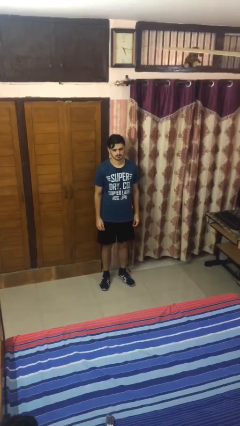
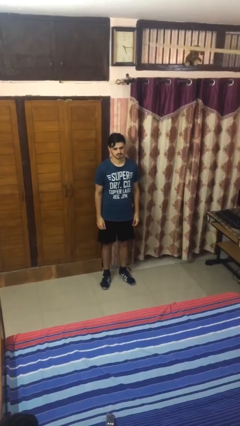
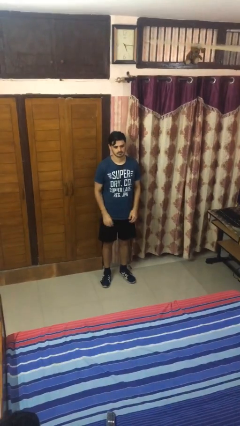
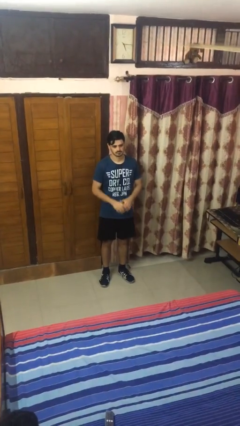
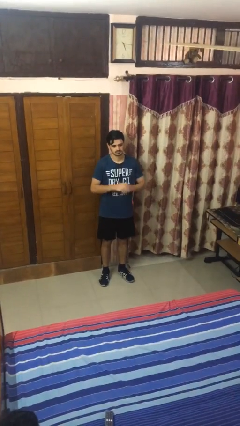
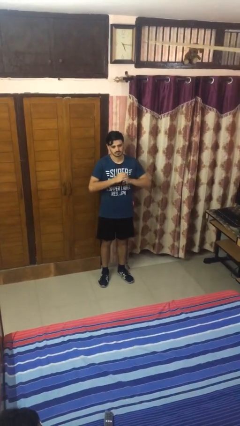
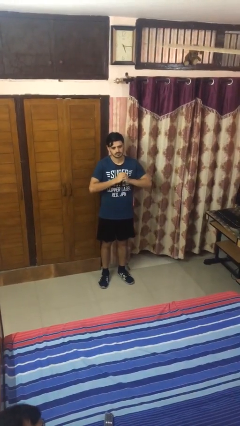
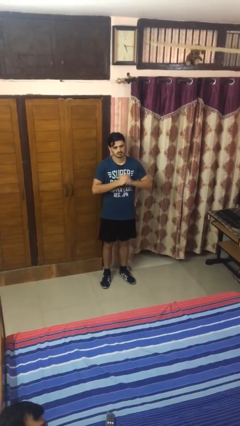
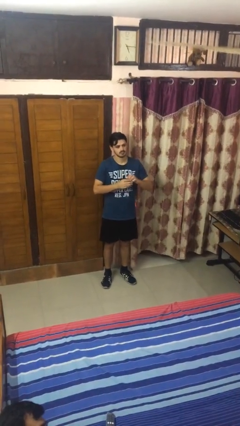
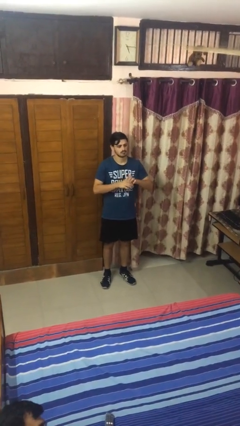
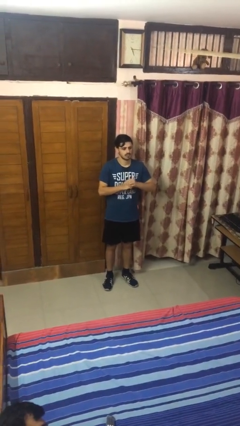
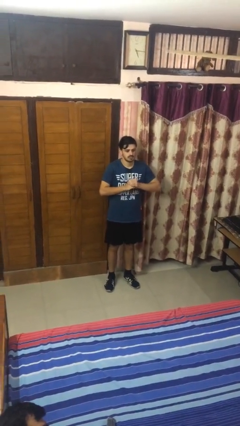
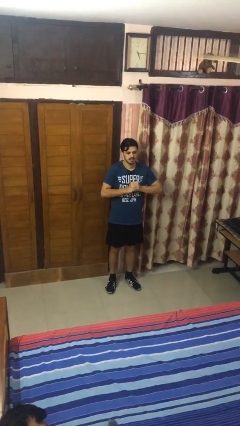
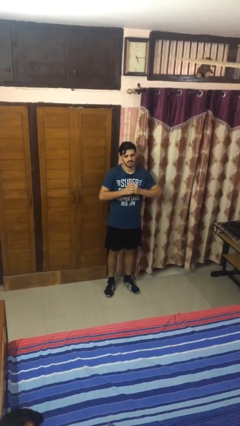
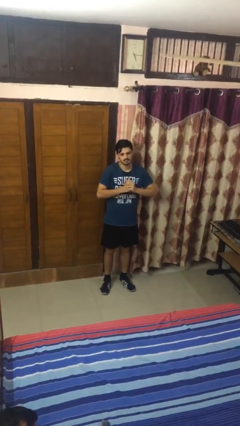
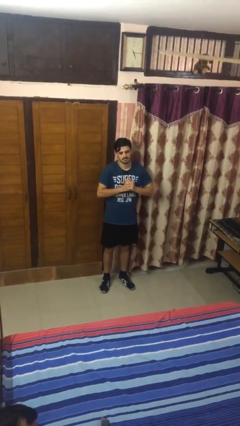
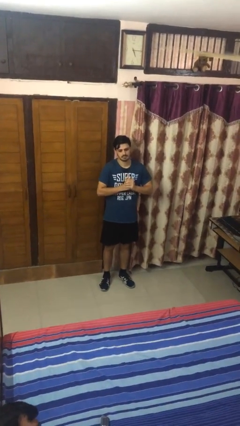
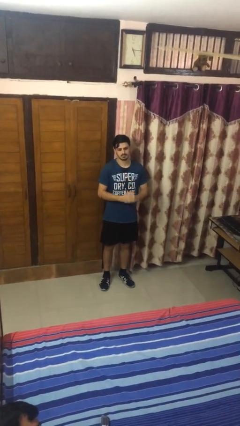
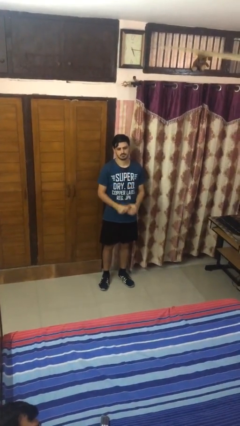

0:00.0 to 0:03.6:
person cracks knuckles

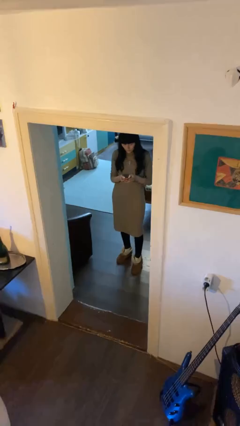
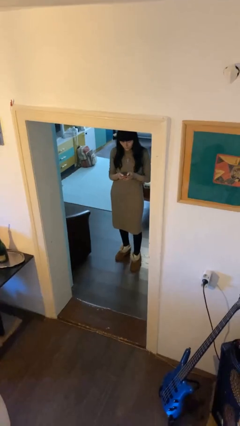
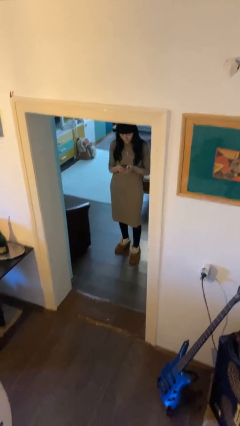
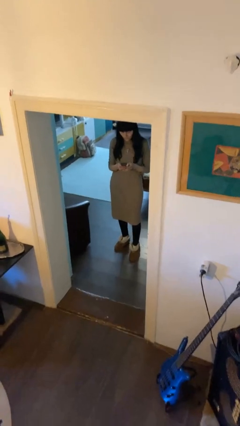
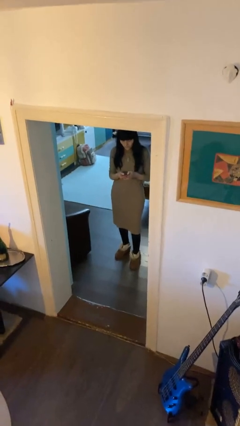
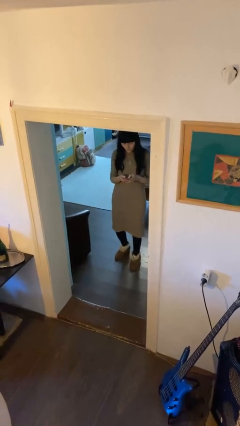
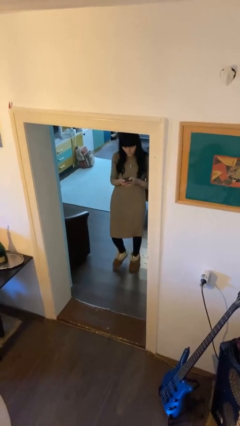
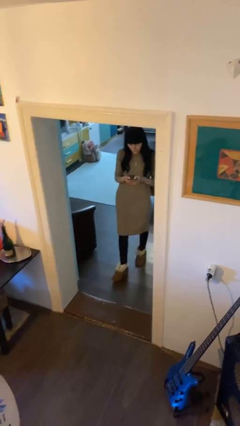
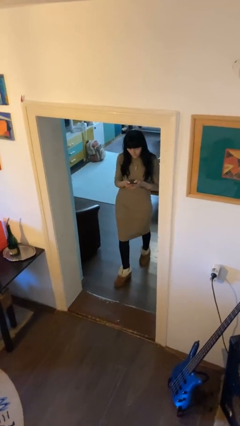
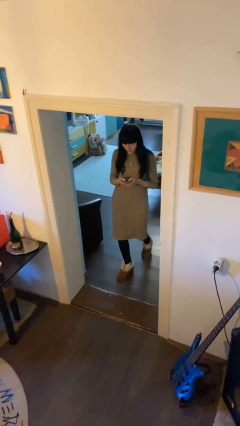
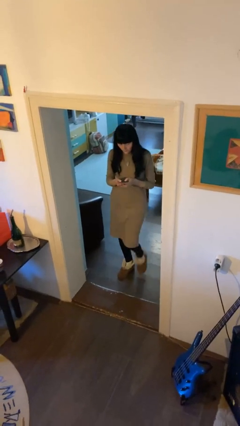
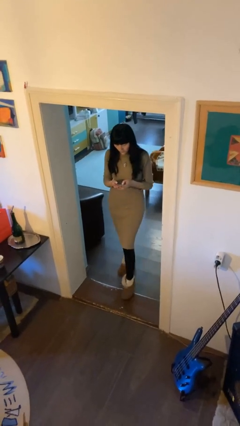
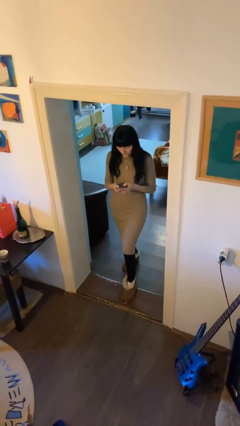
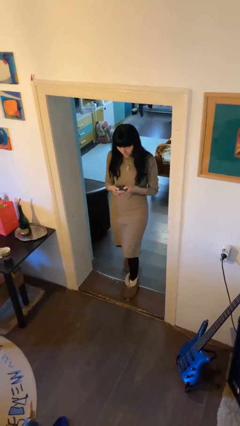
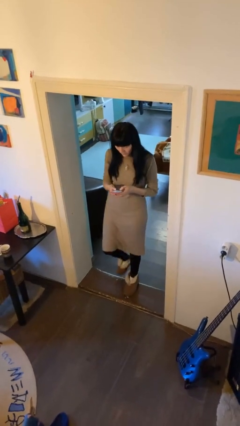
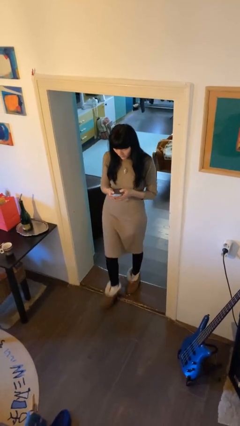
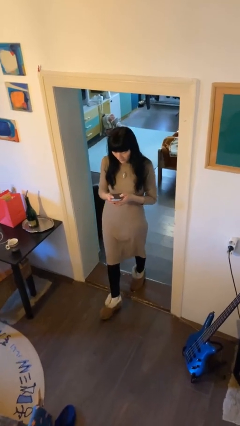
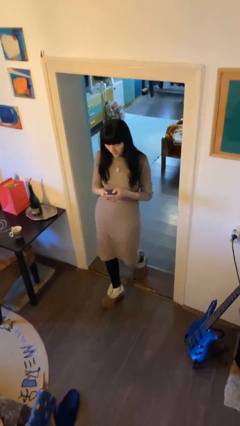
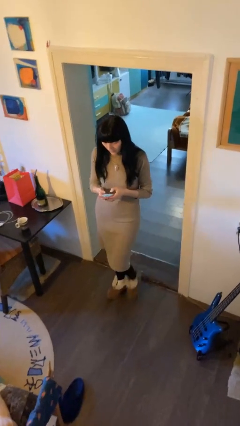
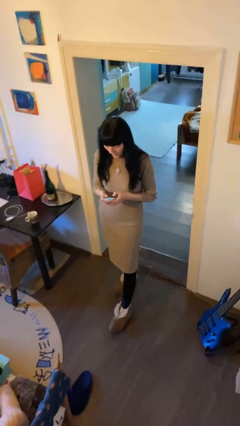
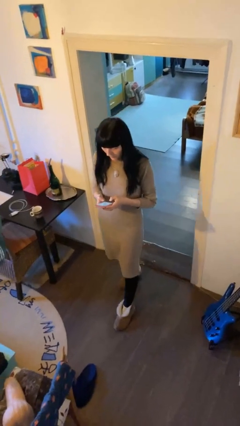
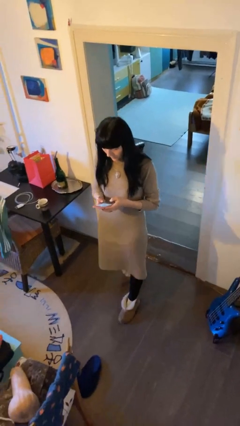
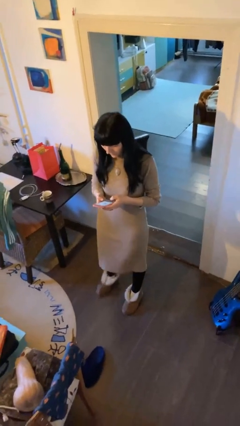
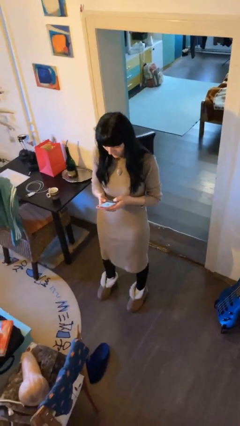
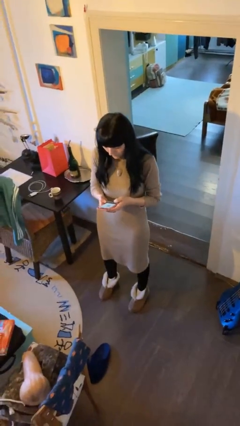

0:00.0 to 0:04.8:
person enters scene through structure

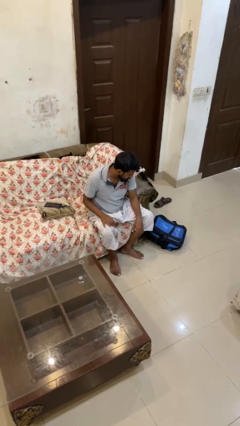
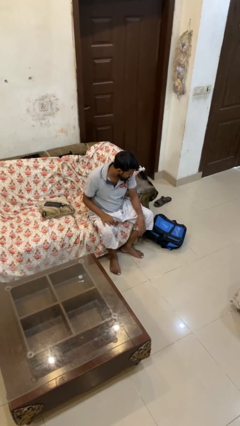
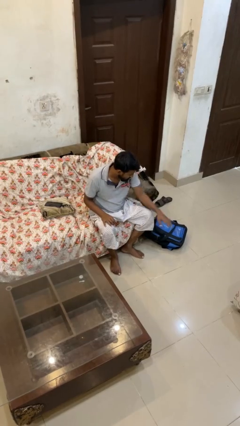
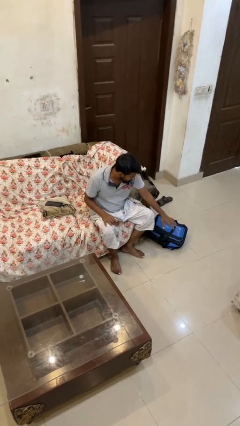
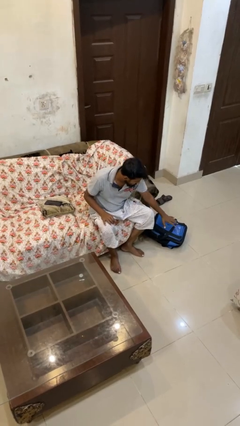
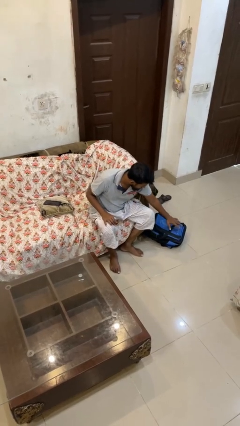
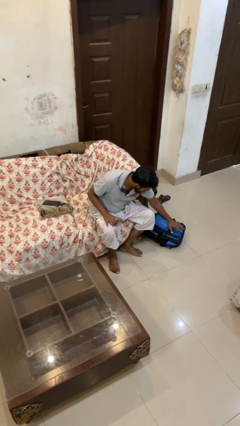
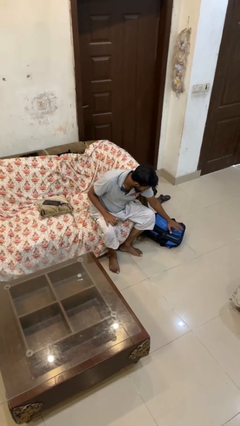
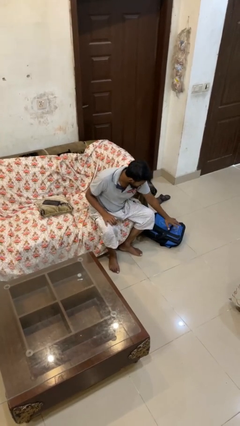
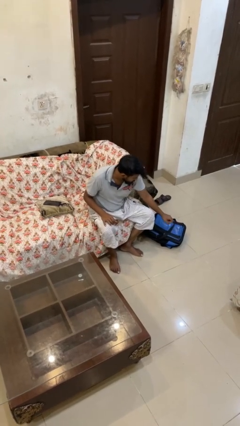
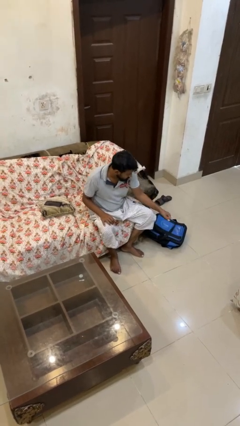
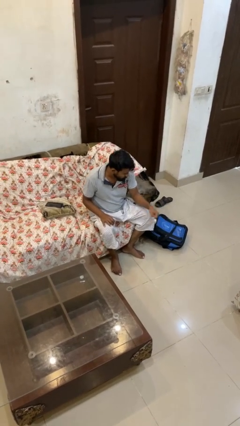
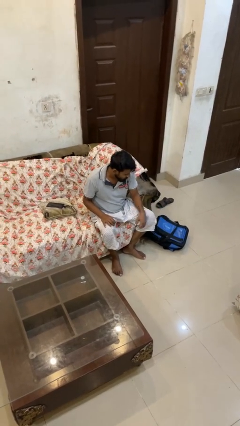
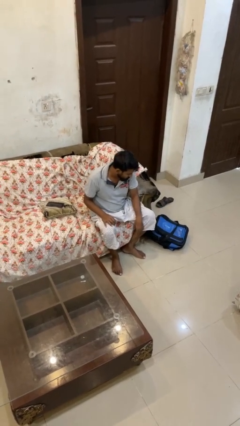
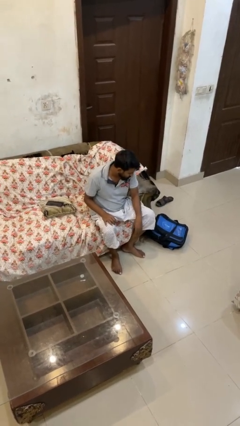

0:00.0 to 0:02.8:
person waves hand over object

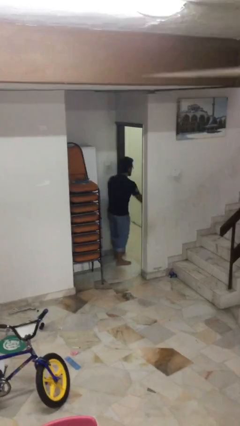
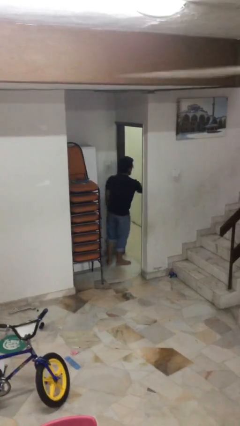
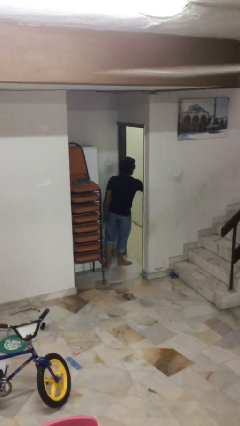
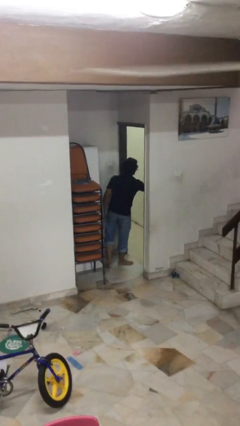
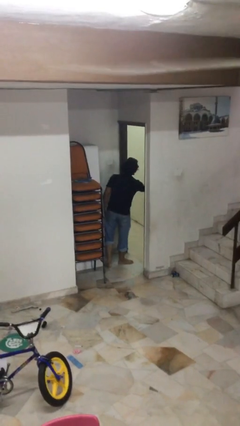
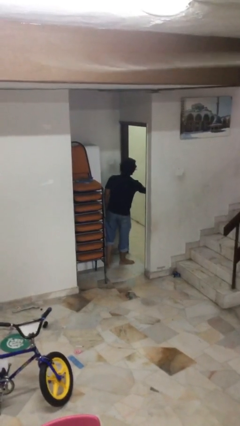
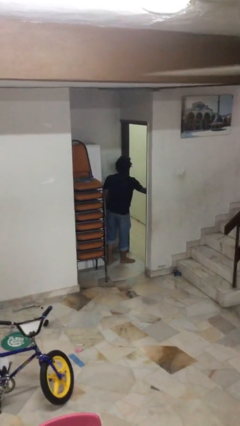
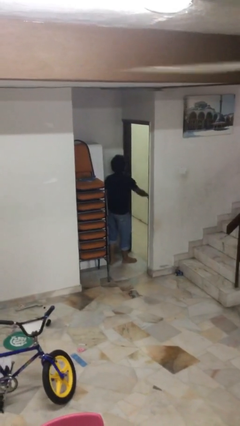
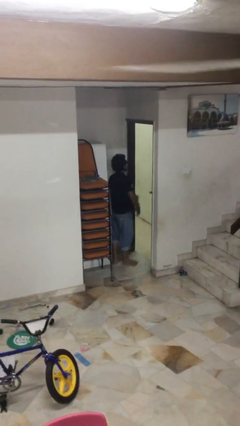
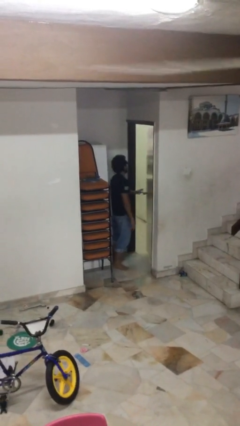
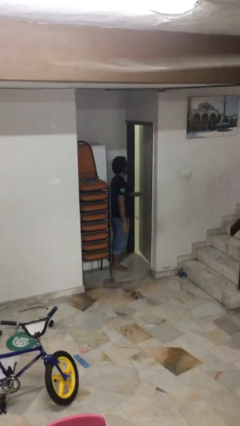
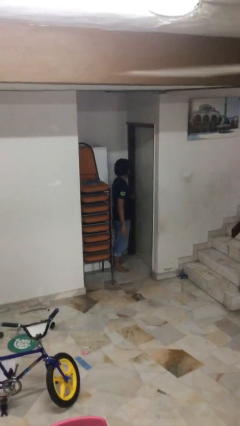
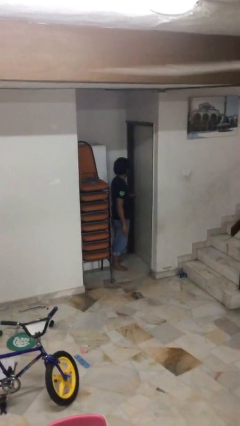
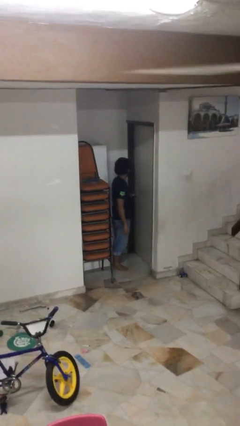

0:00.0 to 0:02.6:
person closes facility door

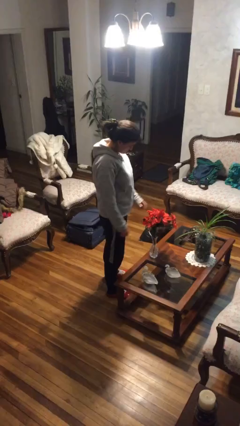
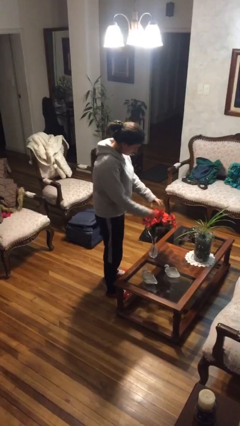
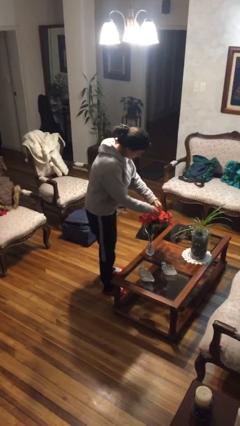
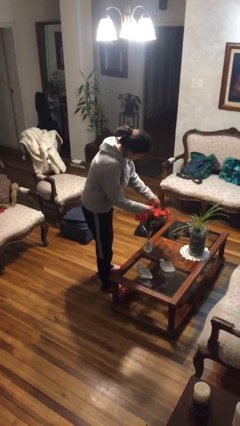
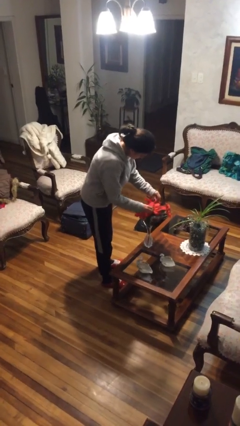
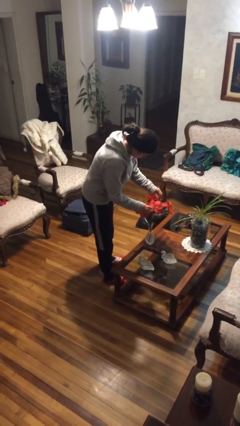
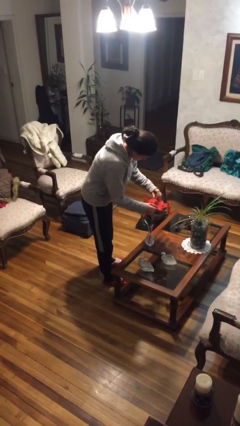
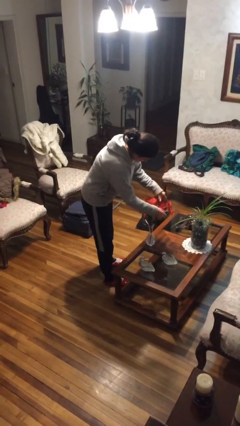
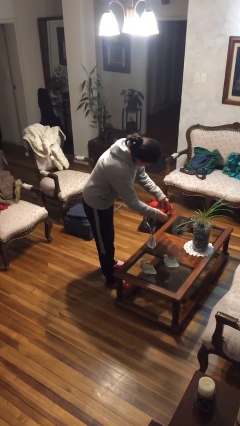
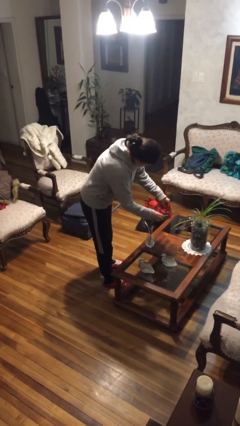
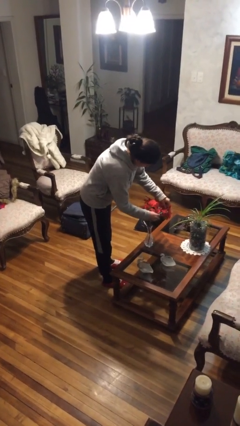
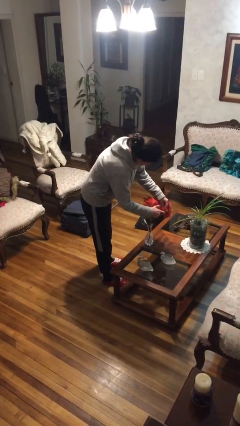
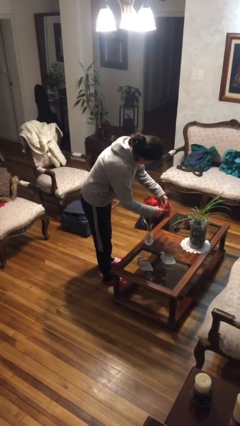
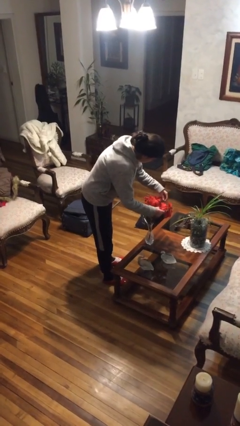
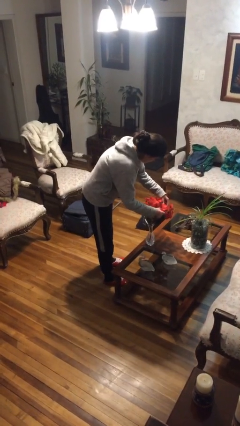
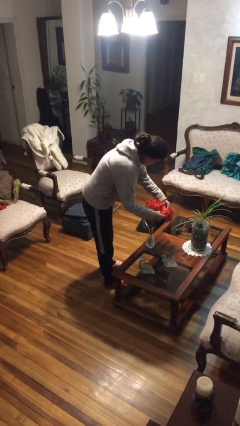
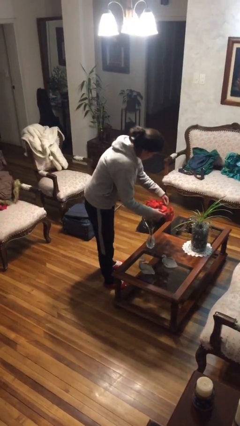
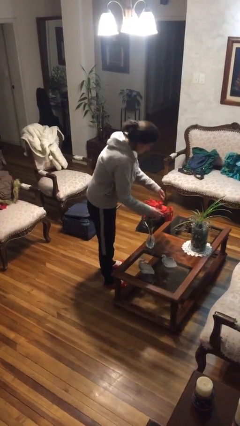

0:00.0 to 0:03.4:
person arranges flowers in vase

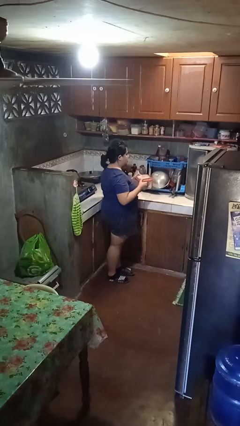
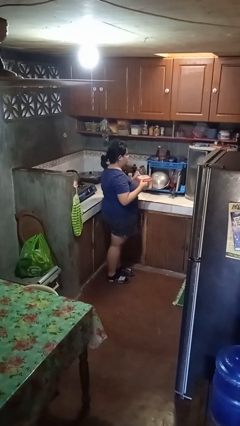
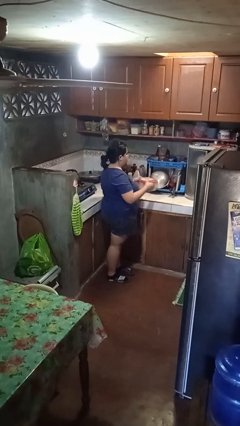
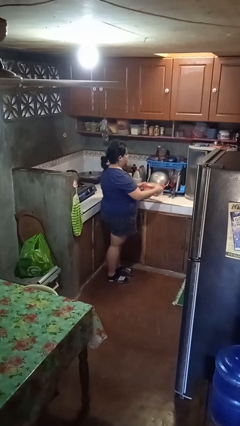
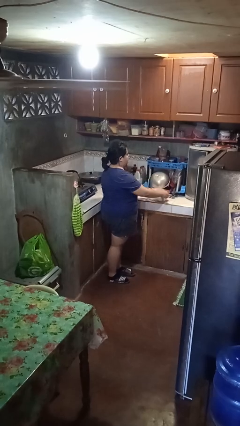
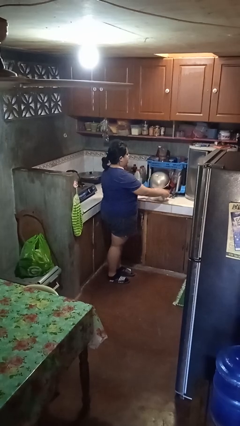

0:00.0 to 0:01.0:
person puts down object on countertop
